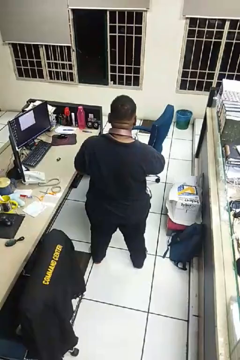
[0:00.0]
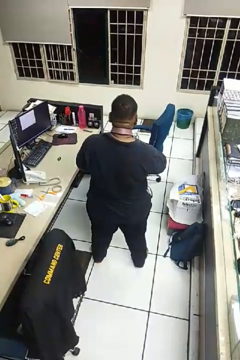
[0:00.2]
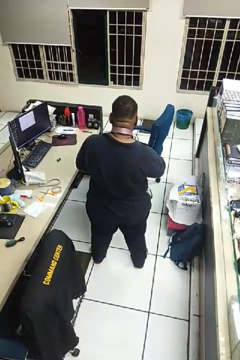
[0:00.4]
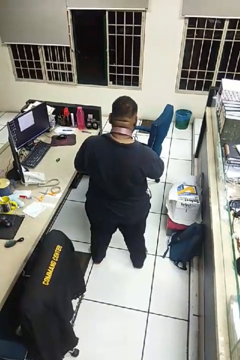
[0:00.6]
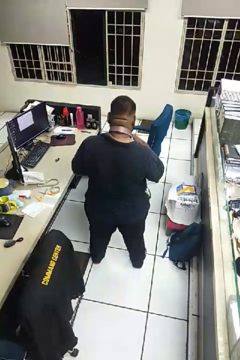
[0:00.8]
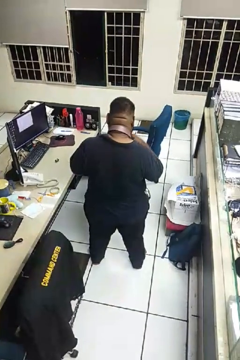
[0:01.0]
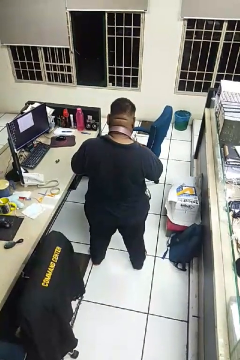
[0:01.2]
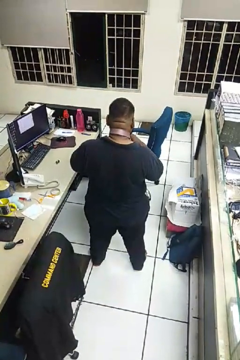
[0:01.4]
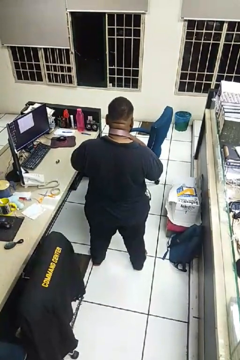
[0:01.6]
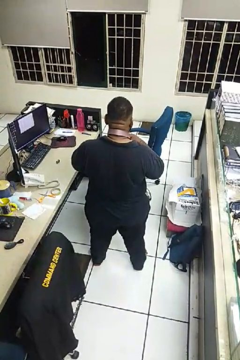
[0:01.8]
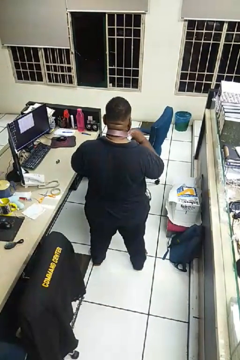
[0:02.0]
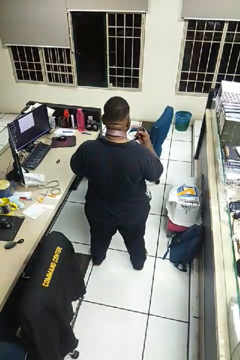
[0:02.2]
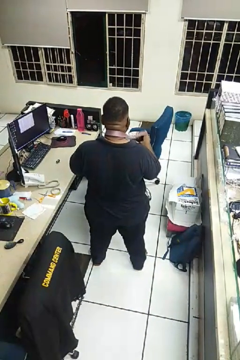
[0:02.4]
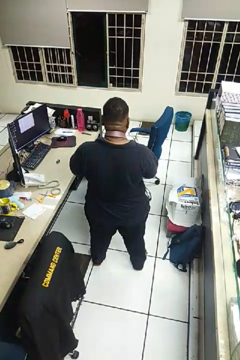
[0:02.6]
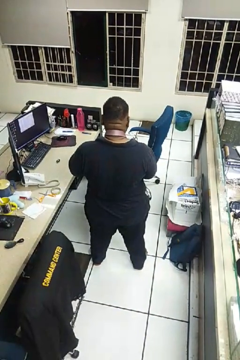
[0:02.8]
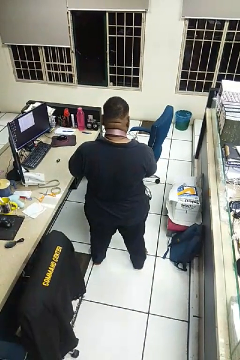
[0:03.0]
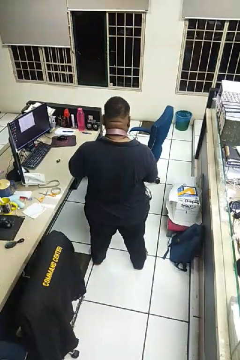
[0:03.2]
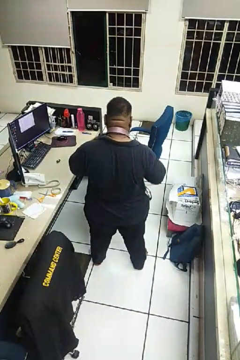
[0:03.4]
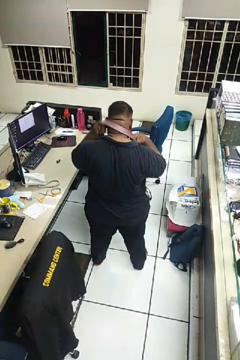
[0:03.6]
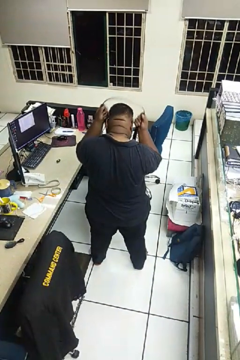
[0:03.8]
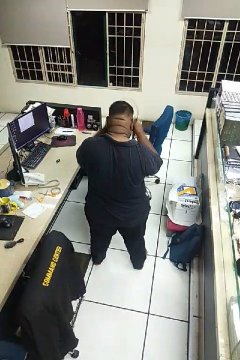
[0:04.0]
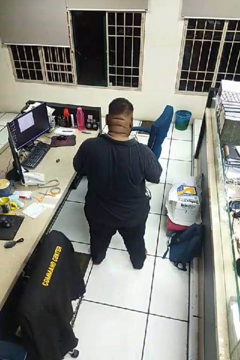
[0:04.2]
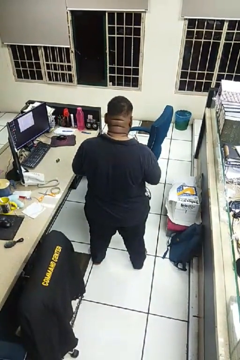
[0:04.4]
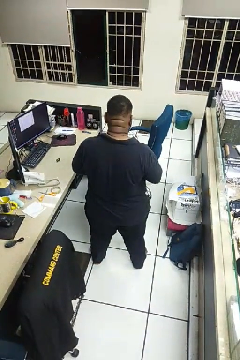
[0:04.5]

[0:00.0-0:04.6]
person takes off necktie

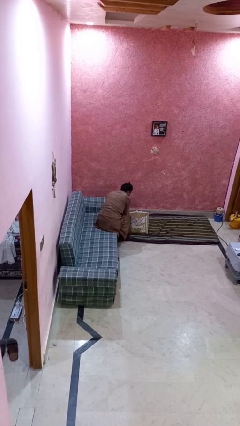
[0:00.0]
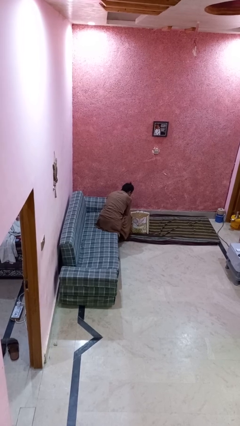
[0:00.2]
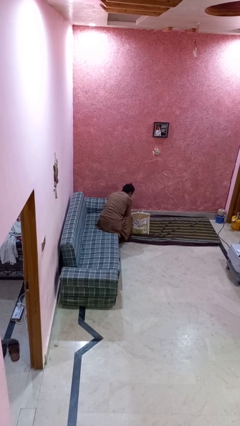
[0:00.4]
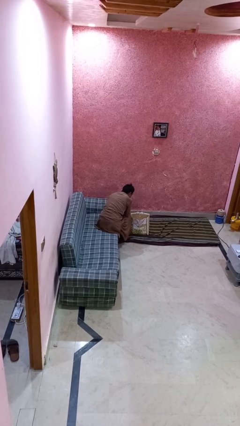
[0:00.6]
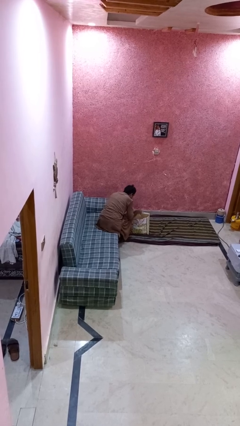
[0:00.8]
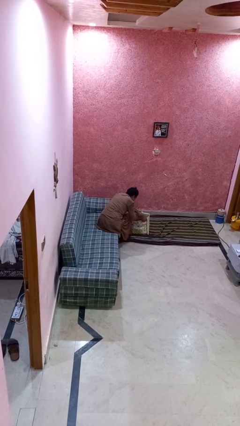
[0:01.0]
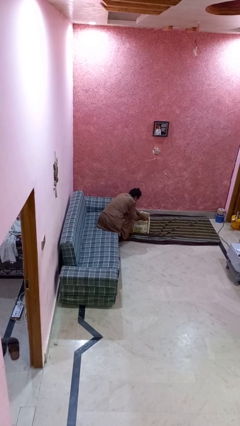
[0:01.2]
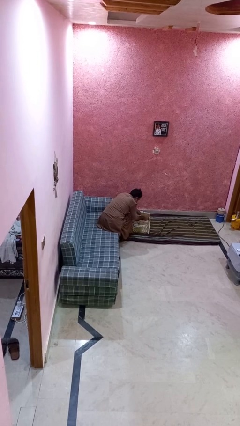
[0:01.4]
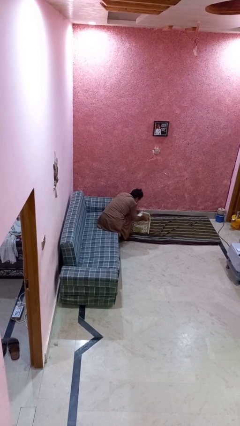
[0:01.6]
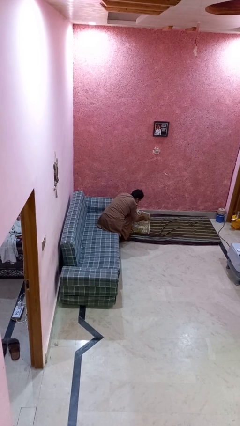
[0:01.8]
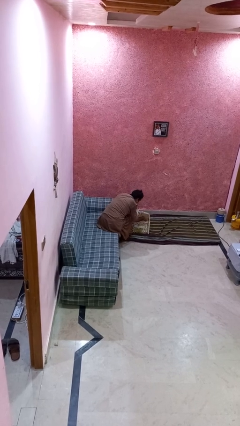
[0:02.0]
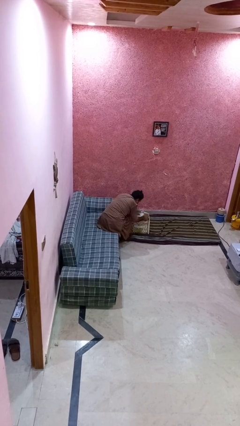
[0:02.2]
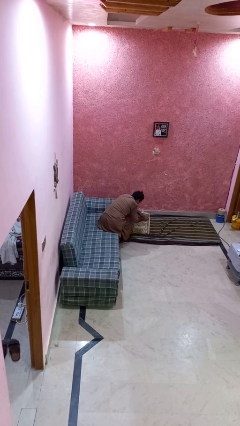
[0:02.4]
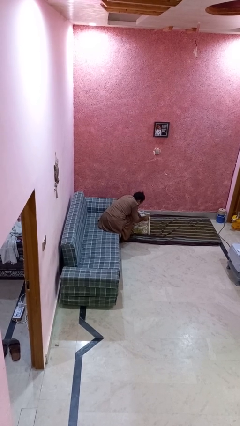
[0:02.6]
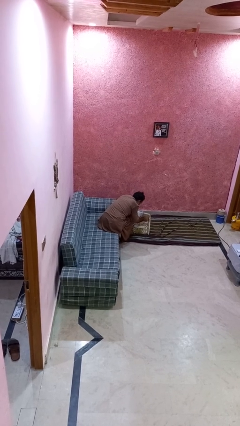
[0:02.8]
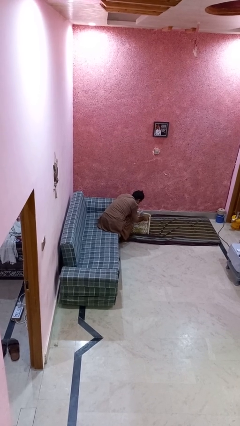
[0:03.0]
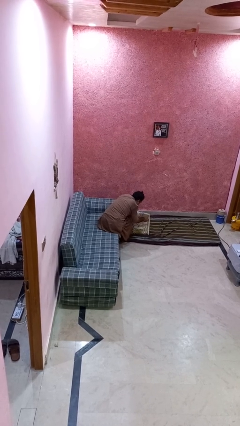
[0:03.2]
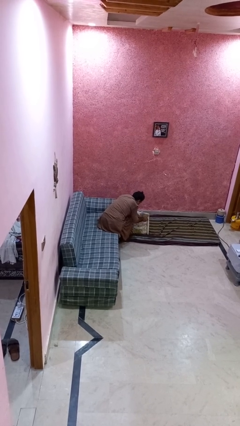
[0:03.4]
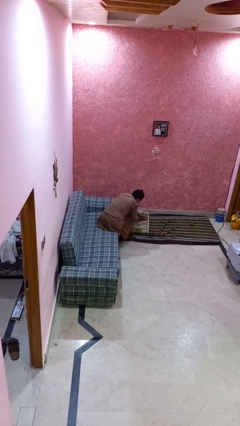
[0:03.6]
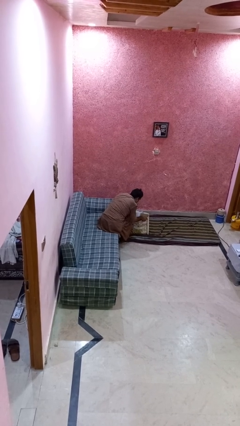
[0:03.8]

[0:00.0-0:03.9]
person searches in bag

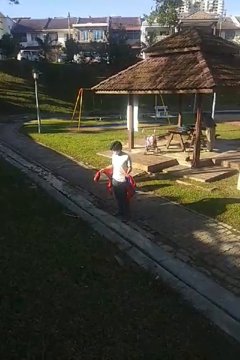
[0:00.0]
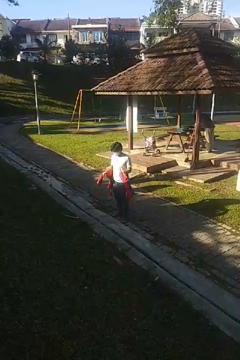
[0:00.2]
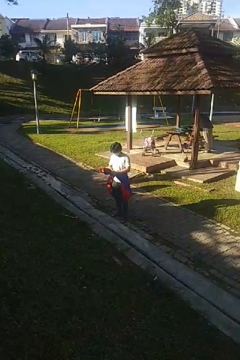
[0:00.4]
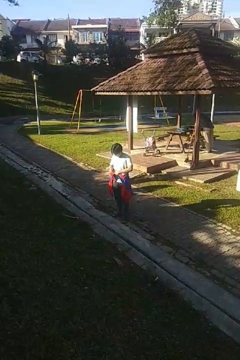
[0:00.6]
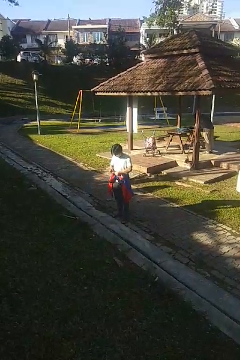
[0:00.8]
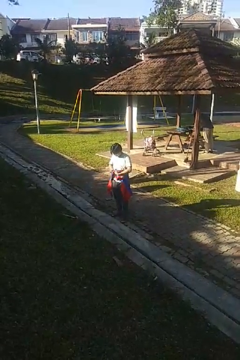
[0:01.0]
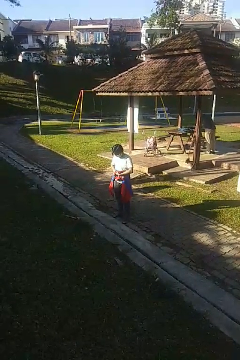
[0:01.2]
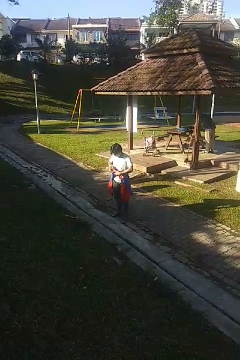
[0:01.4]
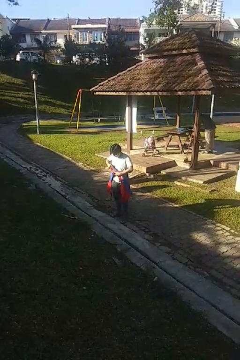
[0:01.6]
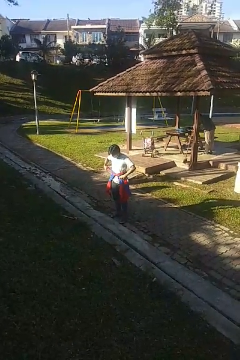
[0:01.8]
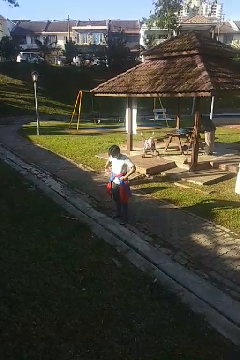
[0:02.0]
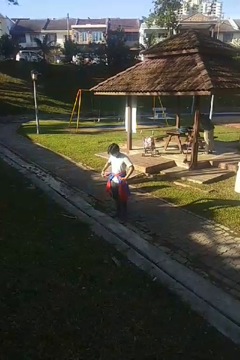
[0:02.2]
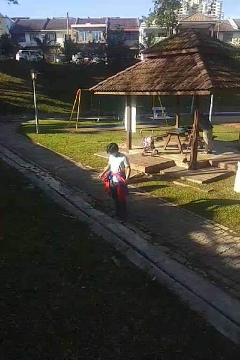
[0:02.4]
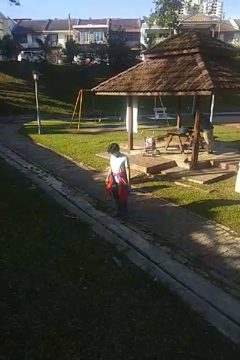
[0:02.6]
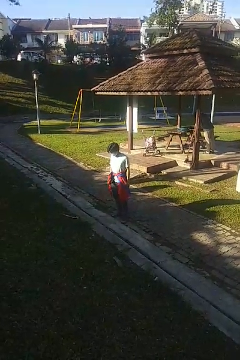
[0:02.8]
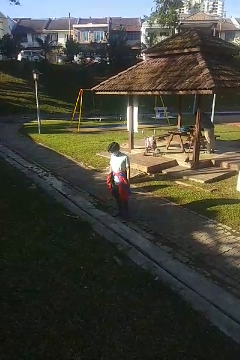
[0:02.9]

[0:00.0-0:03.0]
person ties jacket around waist

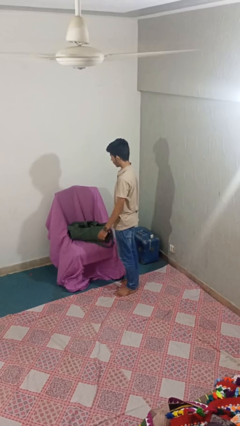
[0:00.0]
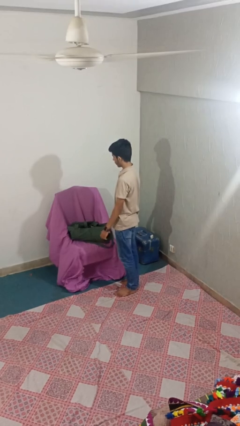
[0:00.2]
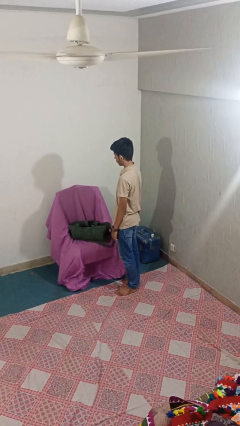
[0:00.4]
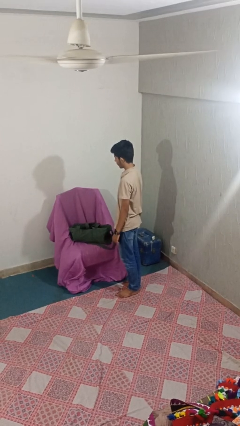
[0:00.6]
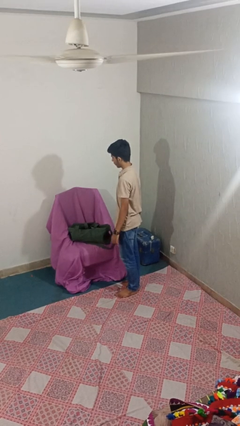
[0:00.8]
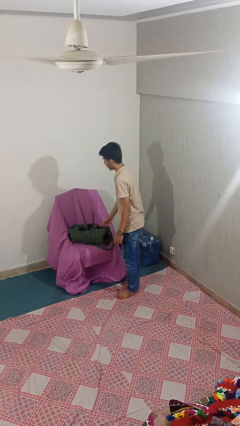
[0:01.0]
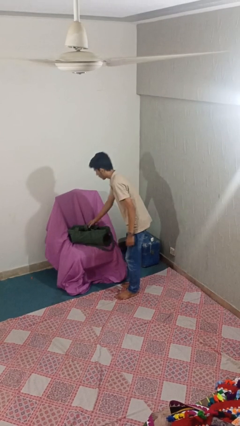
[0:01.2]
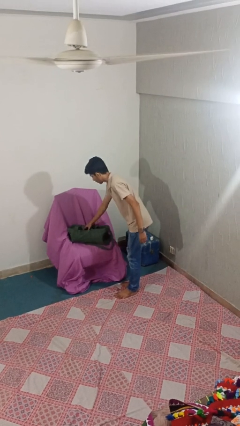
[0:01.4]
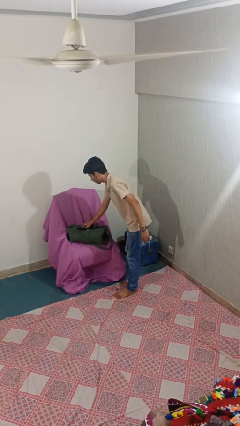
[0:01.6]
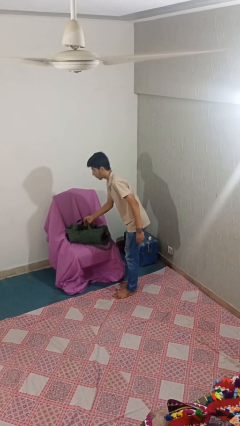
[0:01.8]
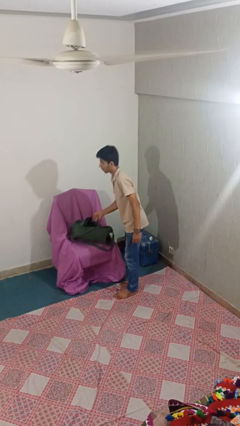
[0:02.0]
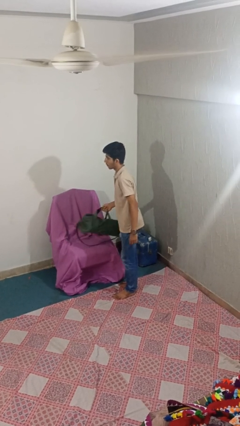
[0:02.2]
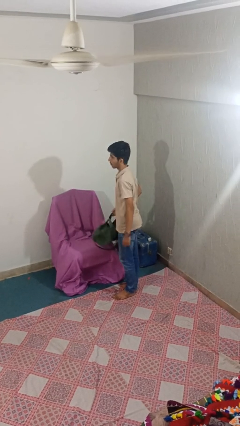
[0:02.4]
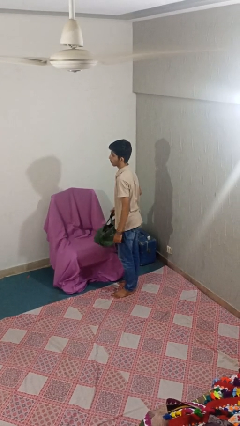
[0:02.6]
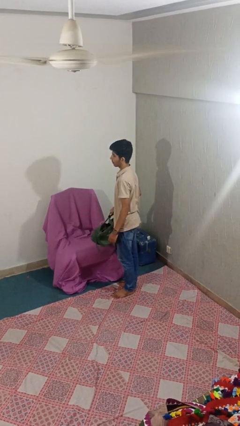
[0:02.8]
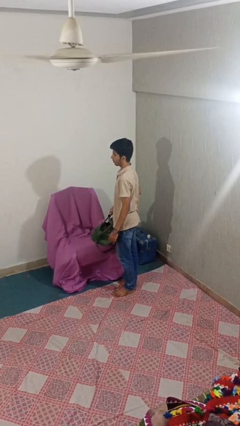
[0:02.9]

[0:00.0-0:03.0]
person picks up object from couch

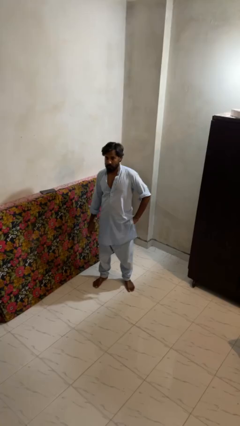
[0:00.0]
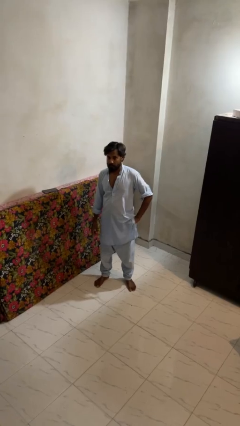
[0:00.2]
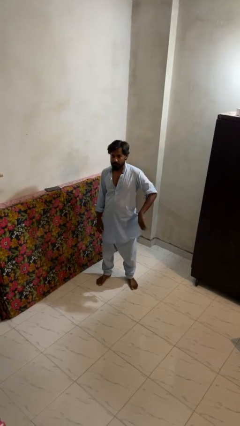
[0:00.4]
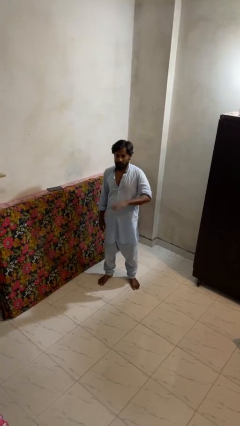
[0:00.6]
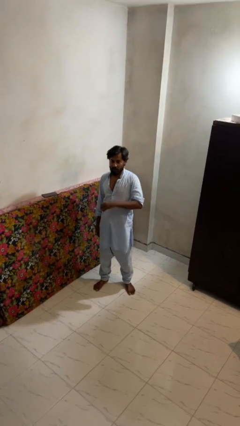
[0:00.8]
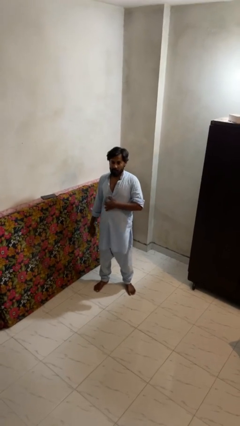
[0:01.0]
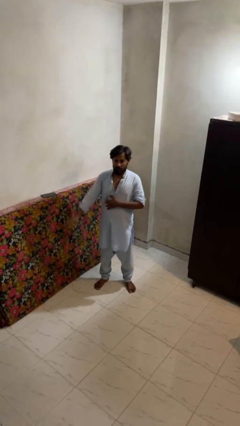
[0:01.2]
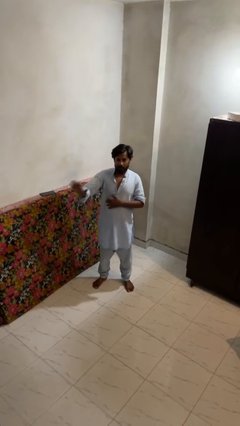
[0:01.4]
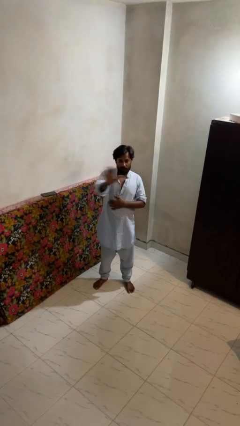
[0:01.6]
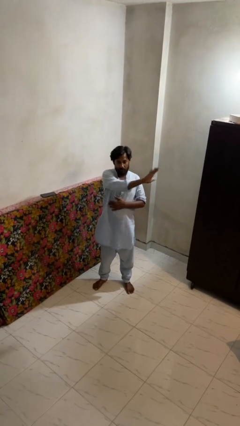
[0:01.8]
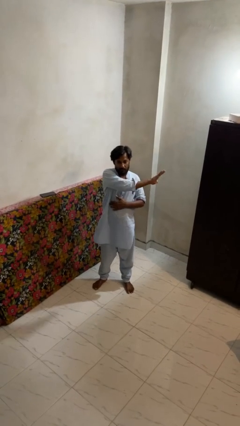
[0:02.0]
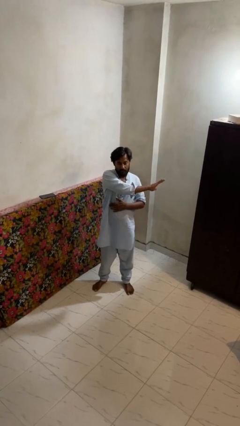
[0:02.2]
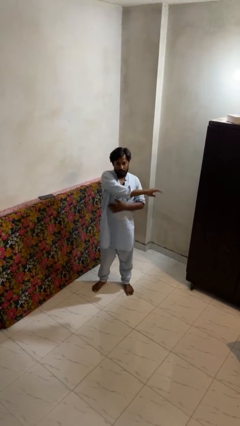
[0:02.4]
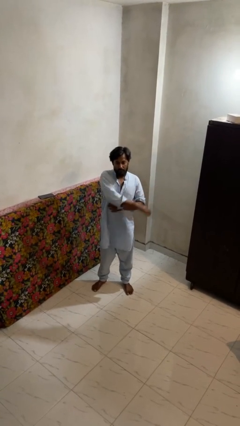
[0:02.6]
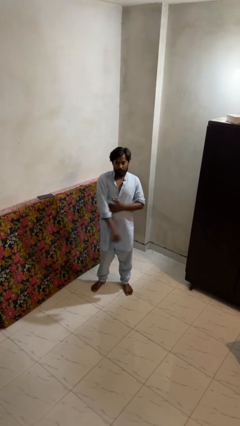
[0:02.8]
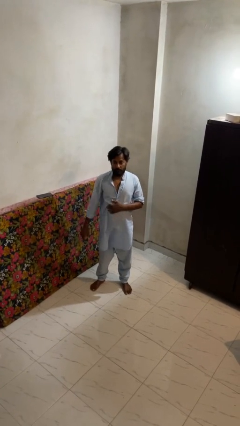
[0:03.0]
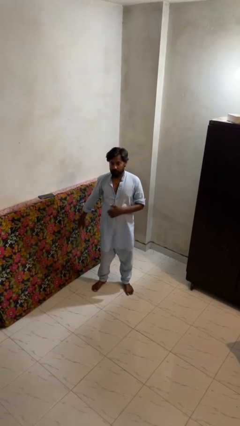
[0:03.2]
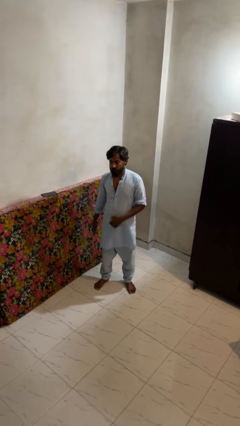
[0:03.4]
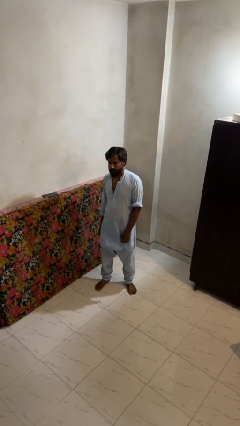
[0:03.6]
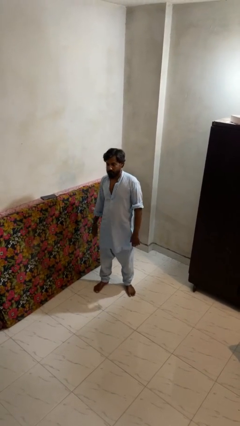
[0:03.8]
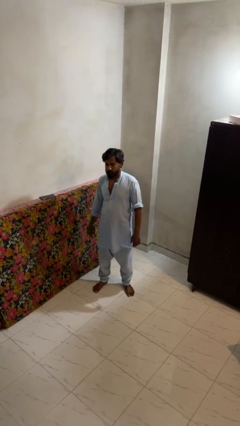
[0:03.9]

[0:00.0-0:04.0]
person gestures swipe left

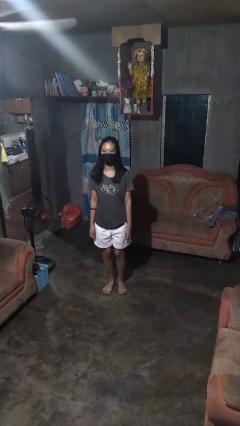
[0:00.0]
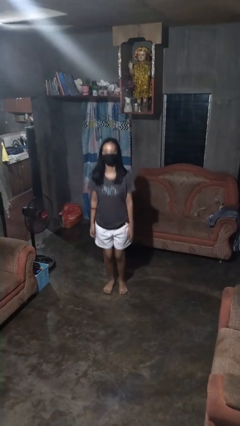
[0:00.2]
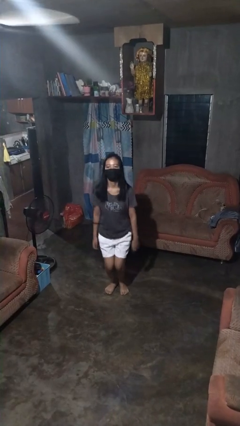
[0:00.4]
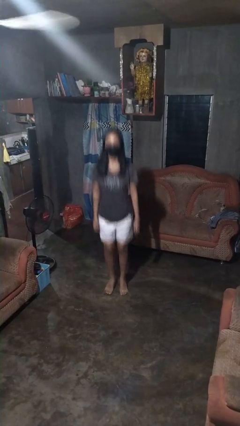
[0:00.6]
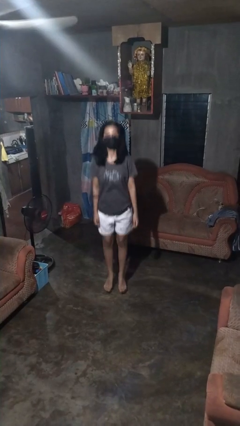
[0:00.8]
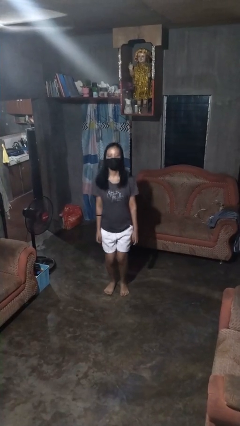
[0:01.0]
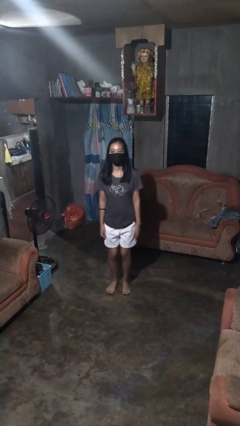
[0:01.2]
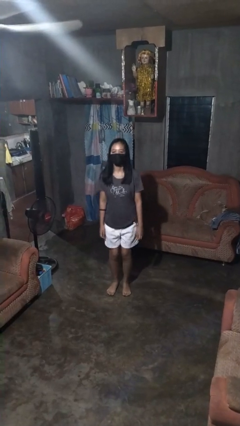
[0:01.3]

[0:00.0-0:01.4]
person jumps
